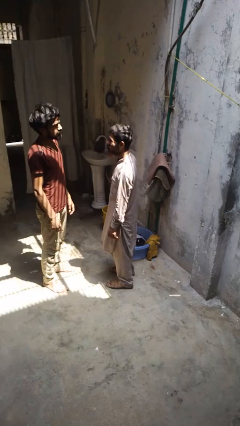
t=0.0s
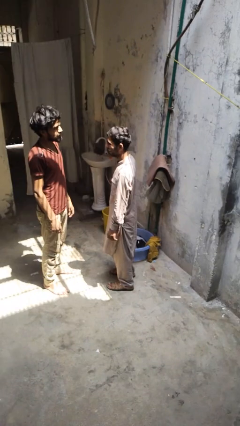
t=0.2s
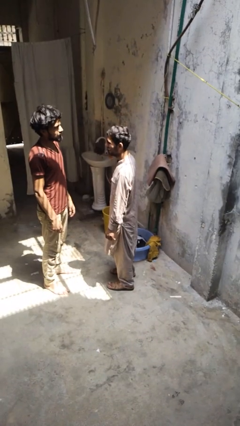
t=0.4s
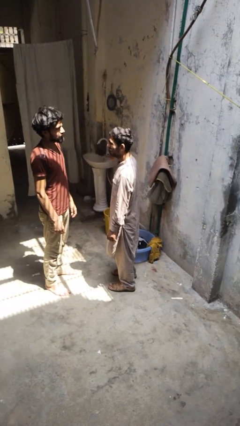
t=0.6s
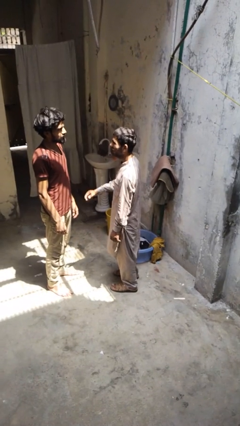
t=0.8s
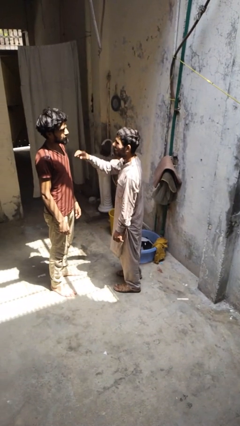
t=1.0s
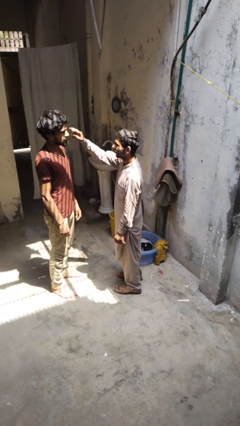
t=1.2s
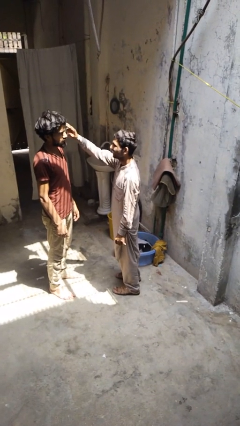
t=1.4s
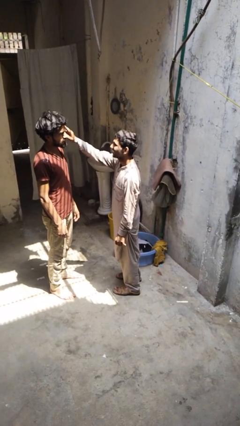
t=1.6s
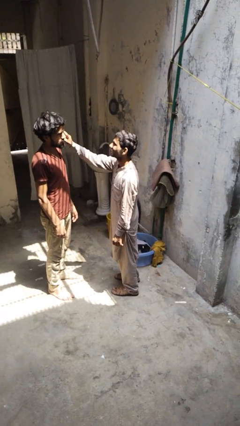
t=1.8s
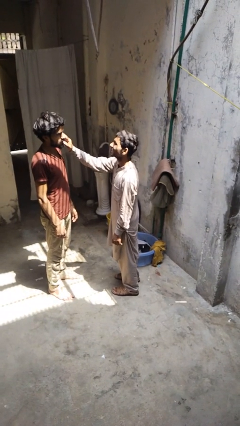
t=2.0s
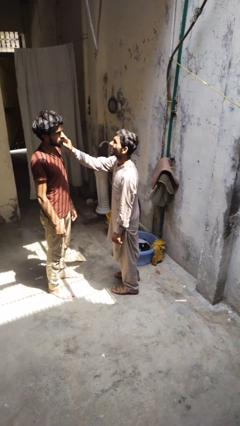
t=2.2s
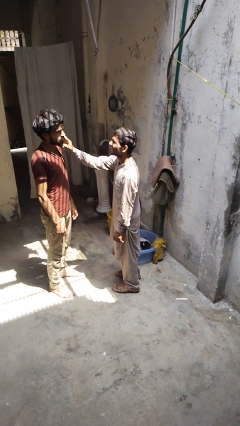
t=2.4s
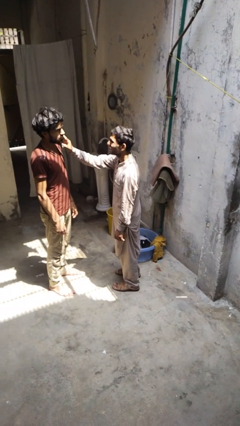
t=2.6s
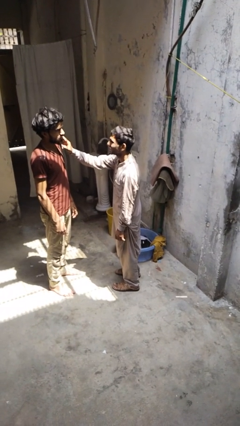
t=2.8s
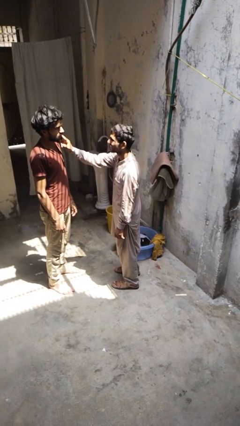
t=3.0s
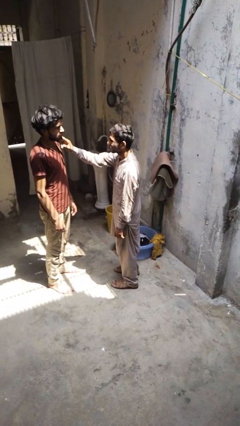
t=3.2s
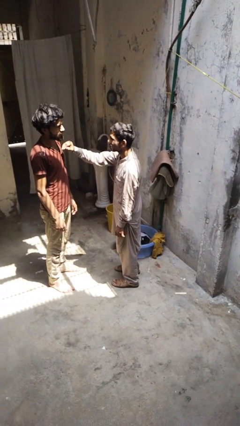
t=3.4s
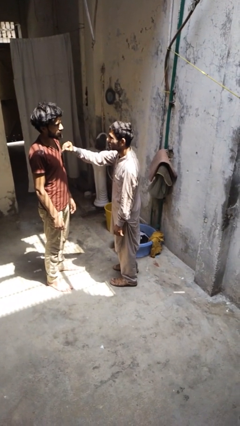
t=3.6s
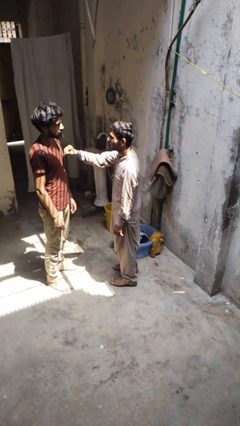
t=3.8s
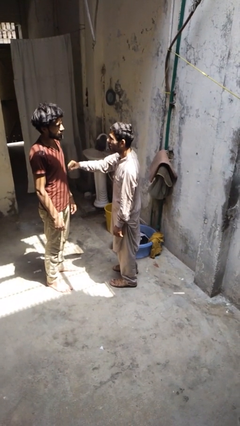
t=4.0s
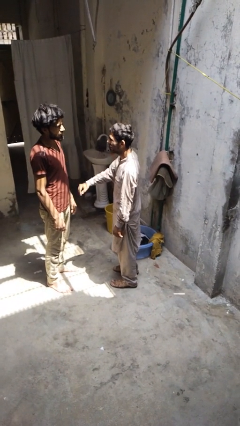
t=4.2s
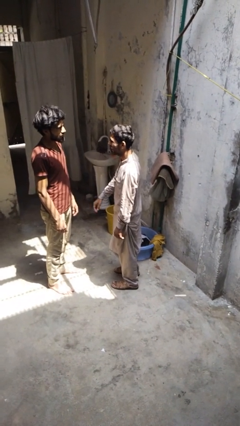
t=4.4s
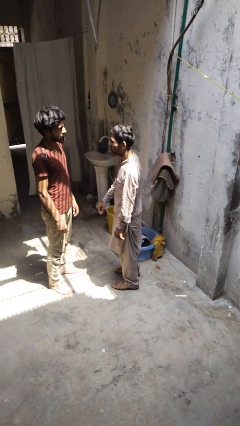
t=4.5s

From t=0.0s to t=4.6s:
person touches face of person

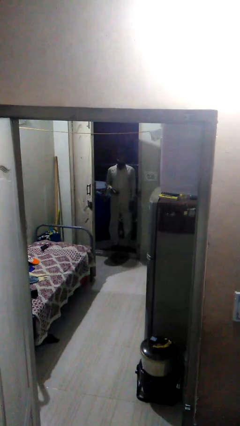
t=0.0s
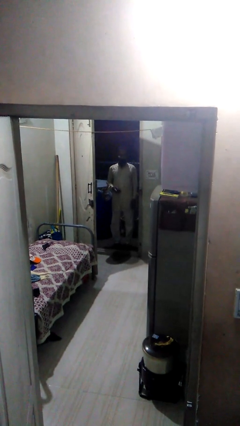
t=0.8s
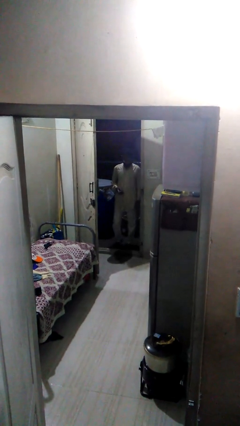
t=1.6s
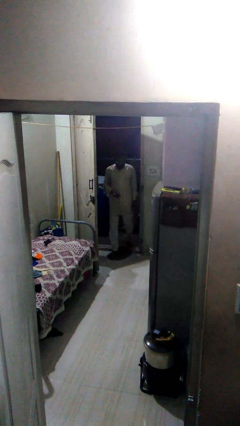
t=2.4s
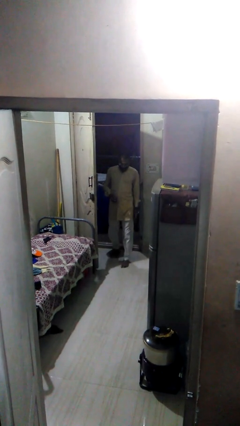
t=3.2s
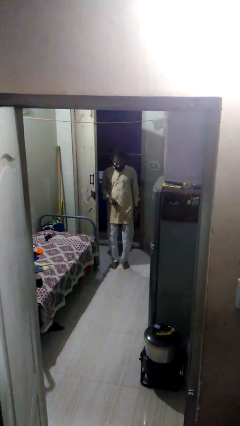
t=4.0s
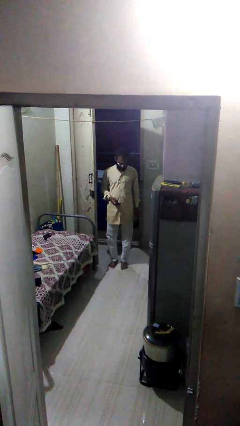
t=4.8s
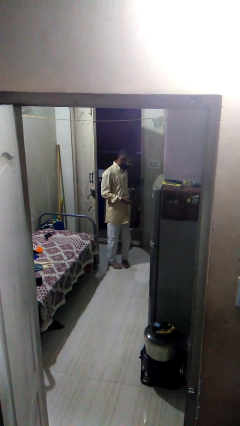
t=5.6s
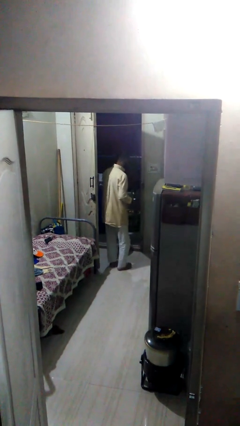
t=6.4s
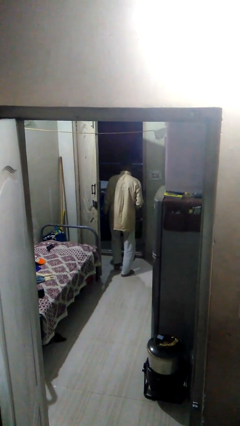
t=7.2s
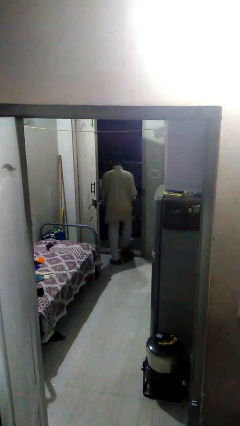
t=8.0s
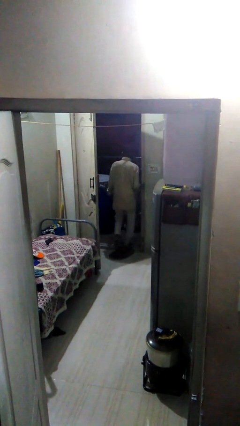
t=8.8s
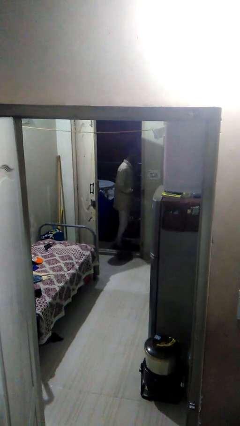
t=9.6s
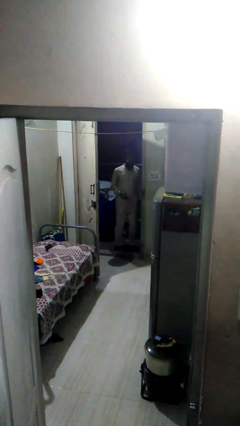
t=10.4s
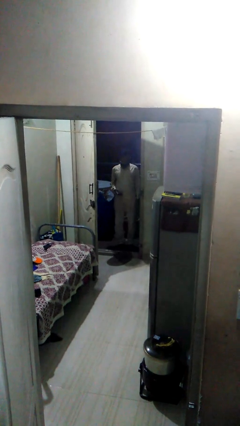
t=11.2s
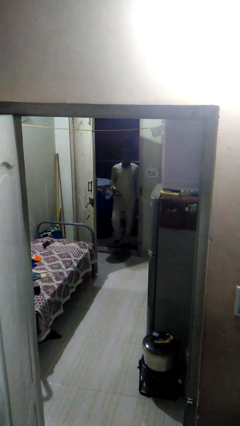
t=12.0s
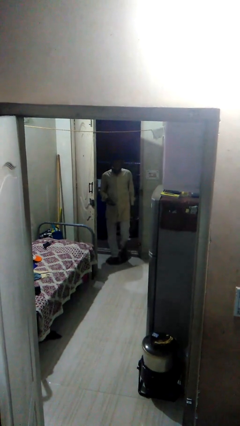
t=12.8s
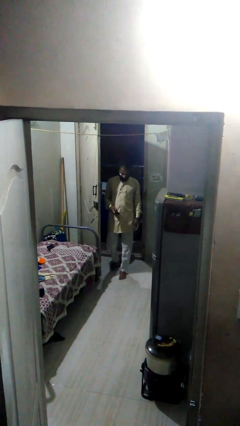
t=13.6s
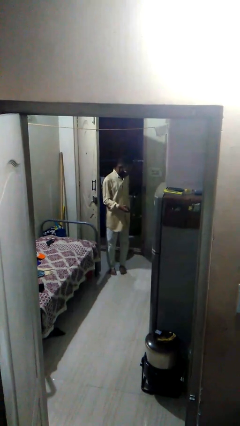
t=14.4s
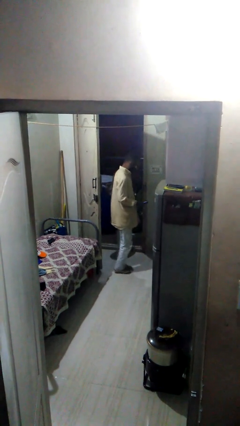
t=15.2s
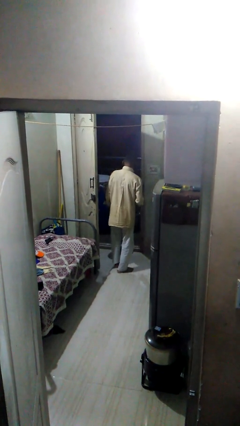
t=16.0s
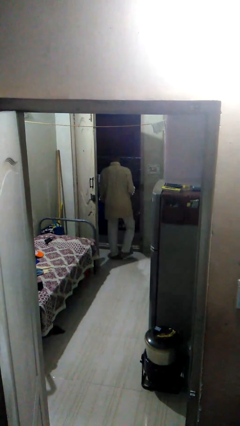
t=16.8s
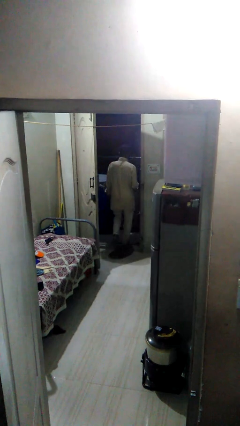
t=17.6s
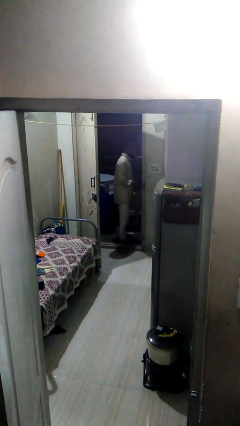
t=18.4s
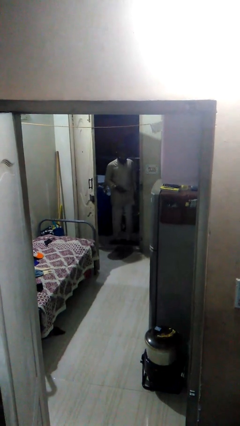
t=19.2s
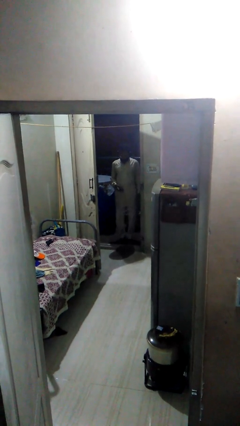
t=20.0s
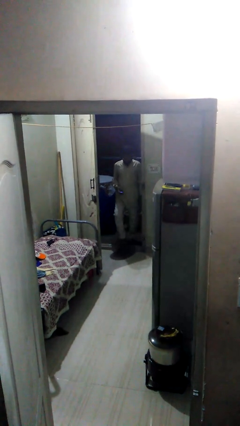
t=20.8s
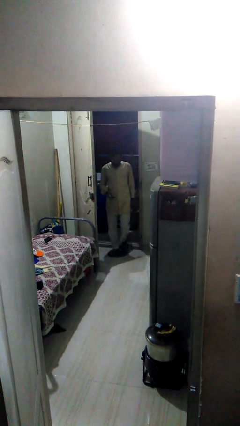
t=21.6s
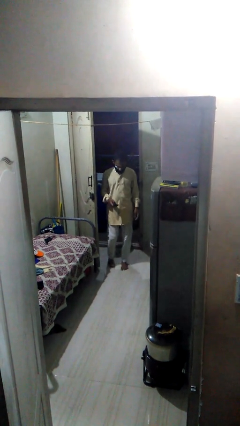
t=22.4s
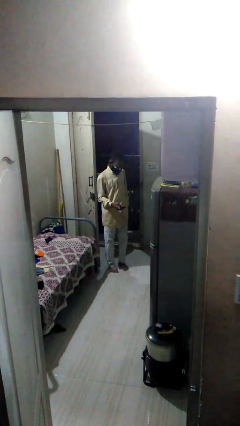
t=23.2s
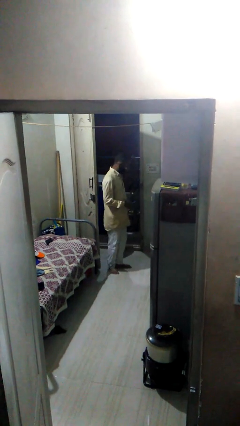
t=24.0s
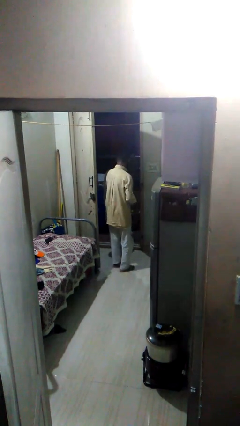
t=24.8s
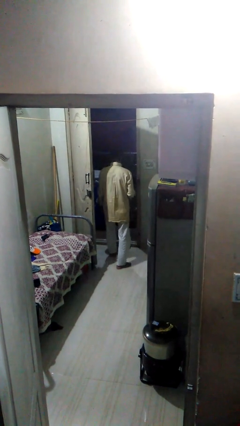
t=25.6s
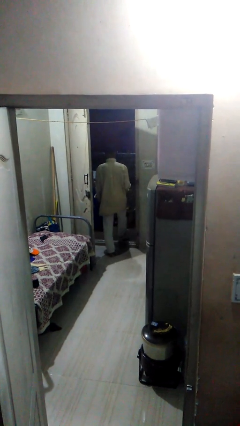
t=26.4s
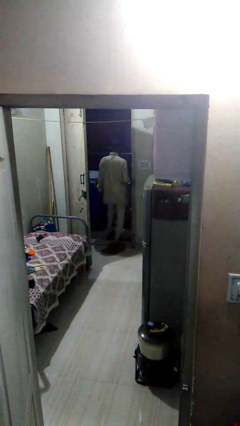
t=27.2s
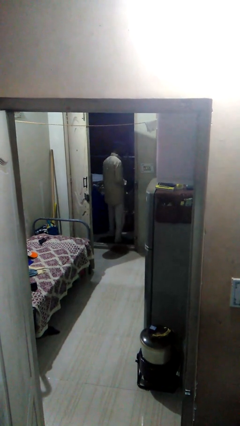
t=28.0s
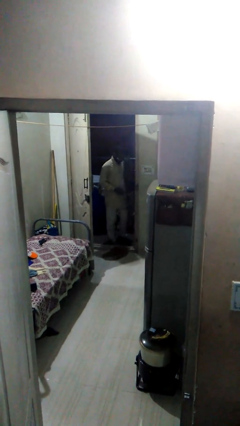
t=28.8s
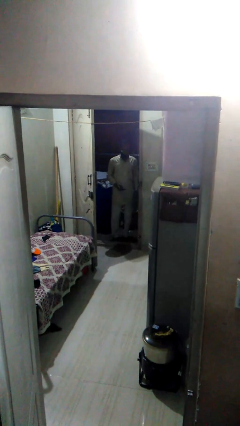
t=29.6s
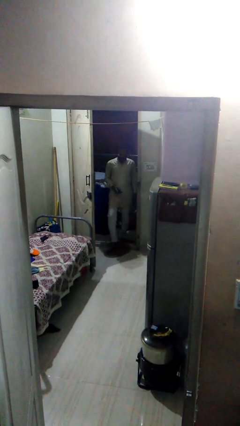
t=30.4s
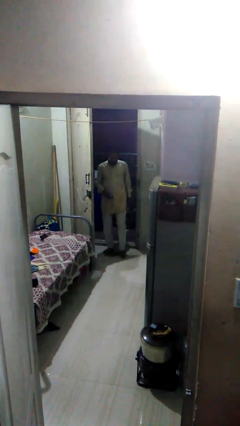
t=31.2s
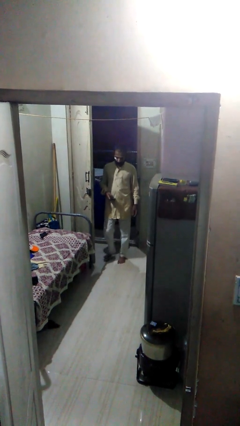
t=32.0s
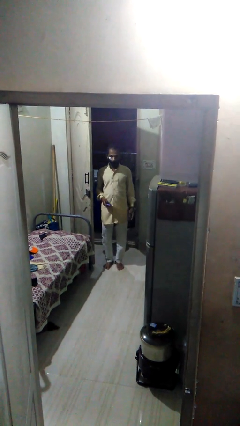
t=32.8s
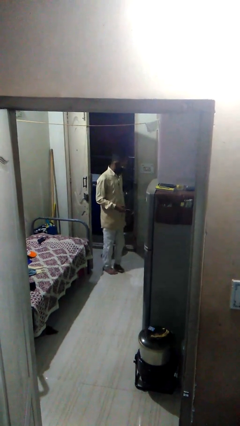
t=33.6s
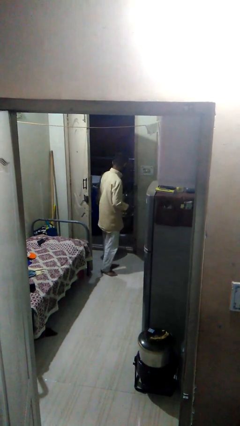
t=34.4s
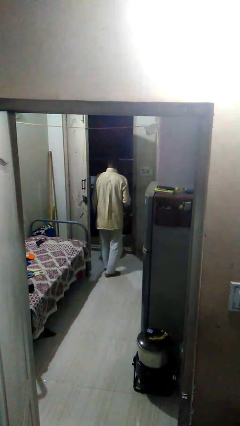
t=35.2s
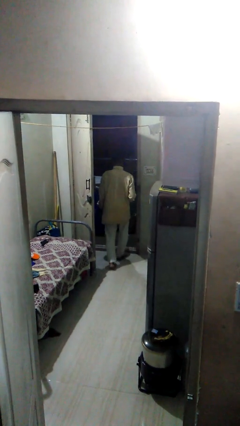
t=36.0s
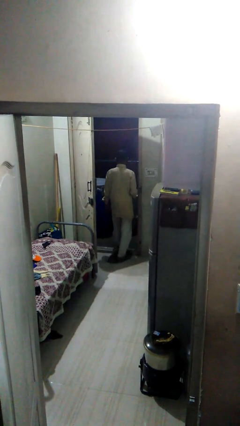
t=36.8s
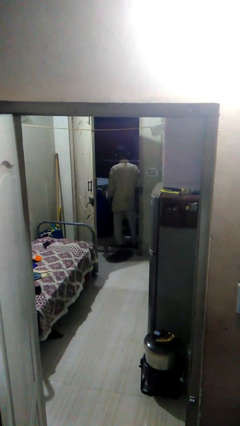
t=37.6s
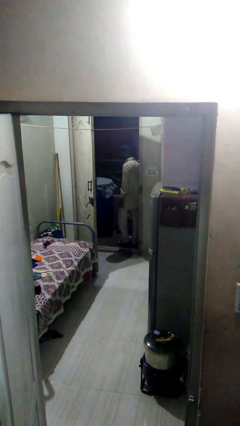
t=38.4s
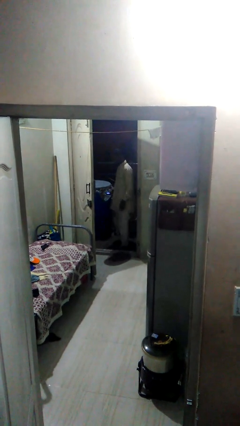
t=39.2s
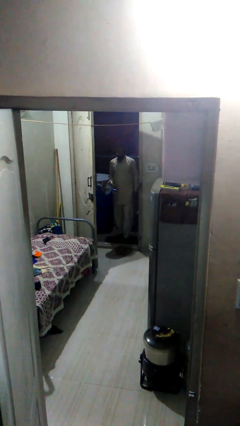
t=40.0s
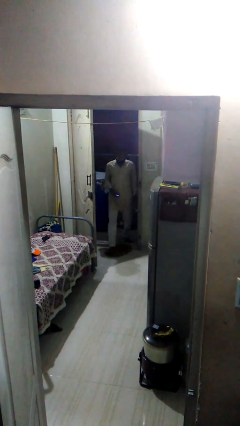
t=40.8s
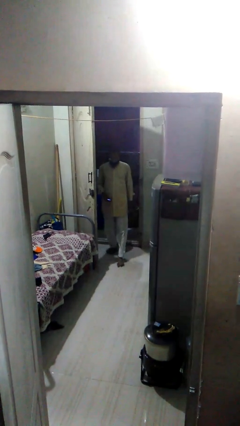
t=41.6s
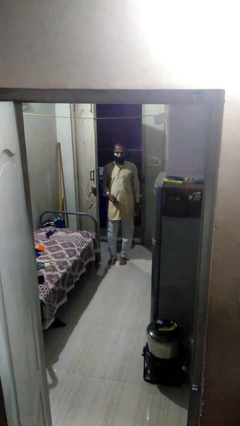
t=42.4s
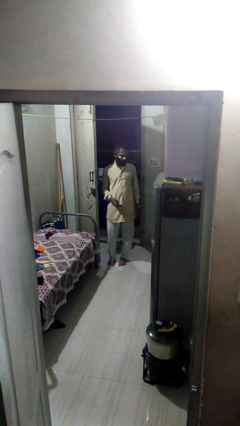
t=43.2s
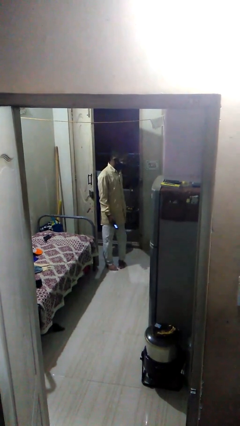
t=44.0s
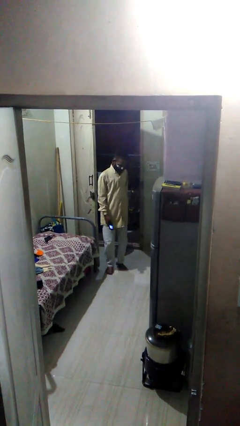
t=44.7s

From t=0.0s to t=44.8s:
person texts on phone

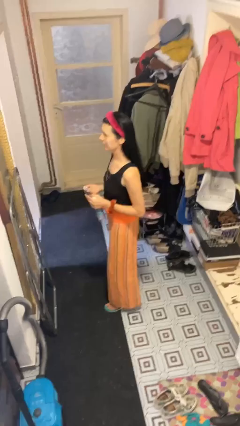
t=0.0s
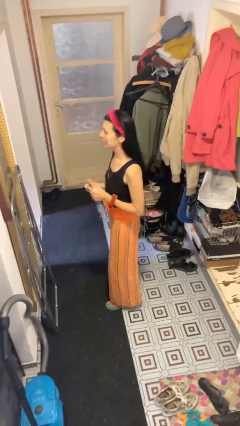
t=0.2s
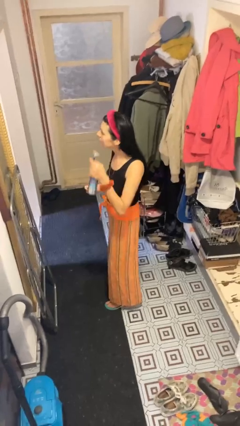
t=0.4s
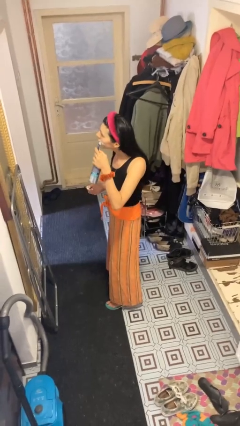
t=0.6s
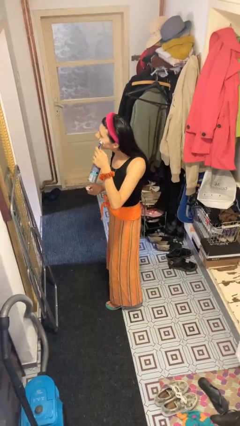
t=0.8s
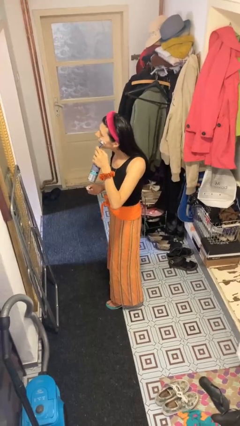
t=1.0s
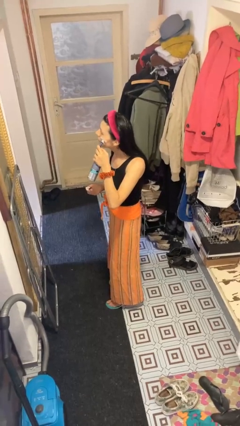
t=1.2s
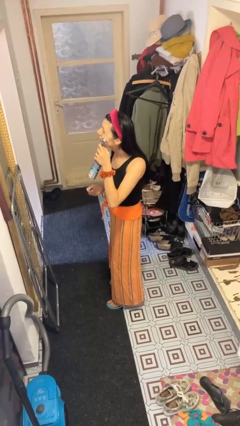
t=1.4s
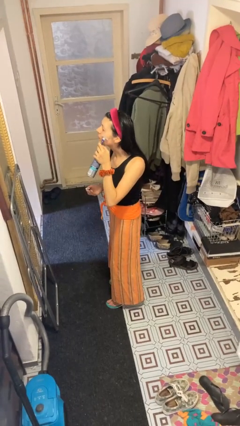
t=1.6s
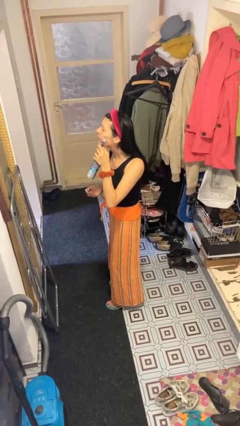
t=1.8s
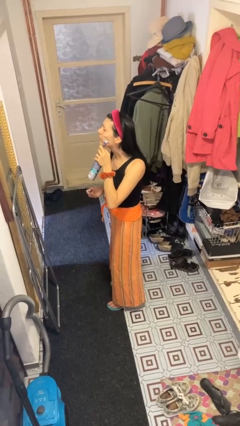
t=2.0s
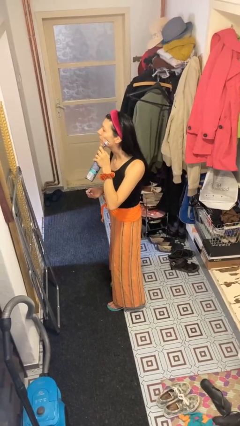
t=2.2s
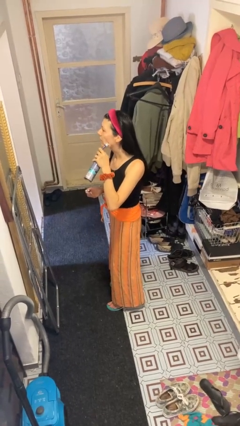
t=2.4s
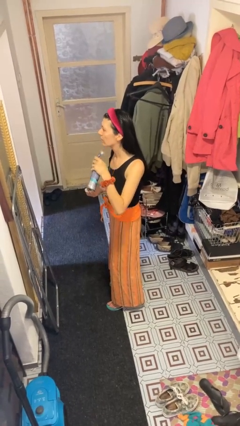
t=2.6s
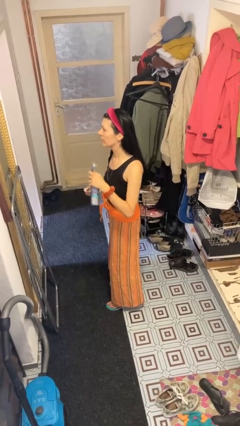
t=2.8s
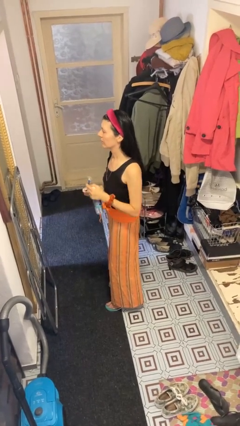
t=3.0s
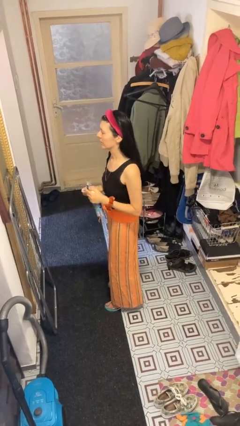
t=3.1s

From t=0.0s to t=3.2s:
person shaves face
